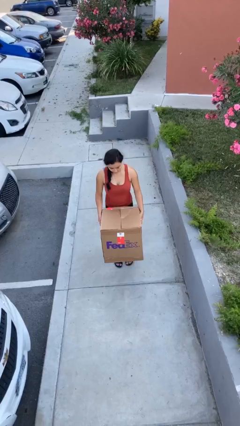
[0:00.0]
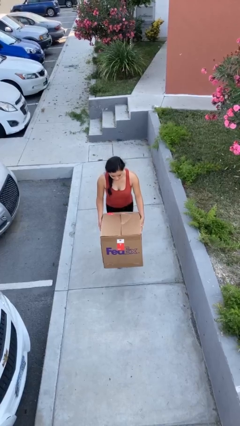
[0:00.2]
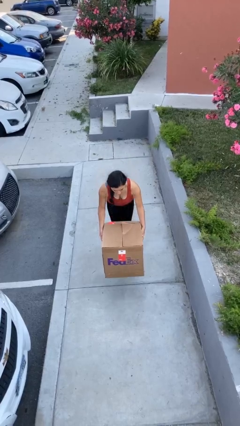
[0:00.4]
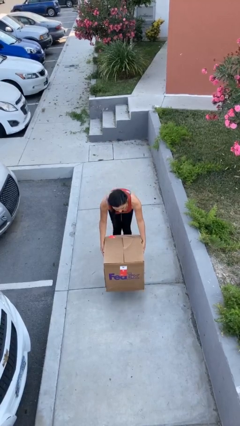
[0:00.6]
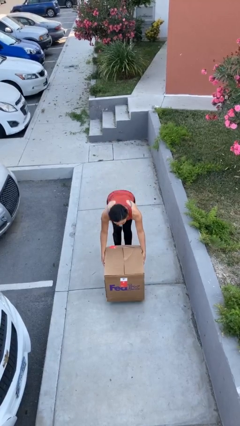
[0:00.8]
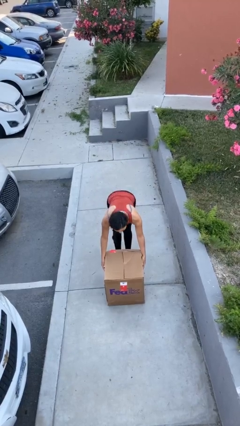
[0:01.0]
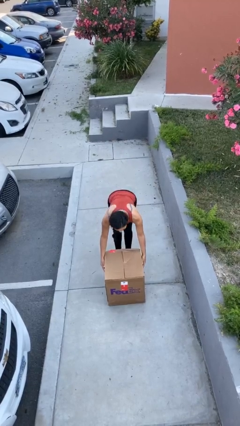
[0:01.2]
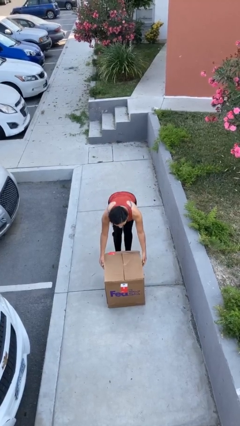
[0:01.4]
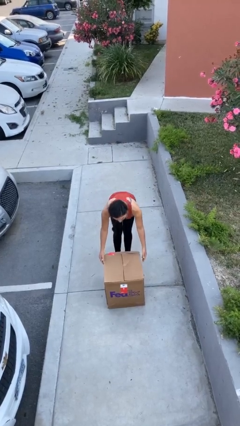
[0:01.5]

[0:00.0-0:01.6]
person puts down object on floor

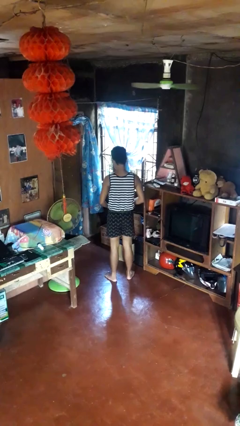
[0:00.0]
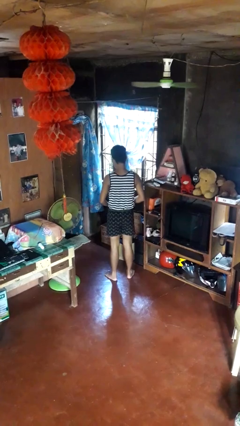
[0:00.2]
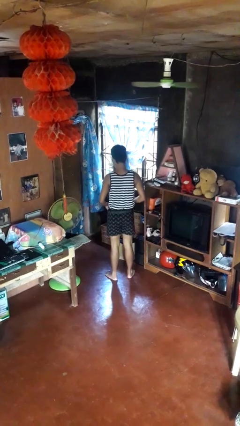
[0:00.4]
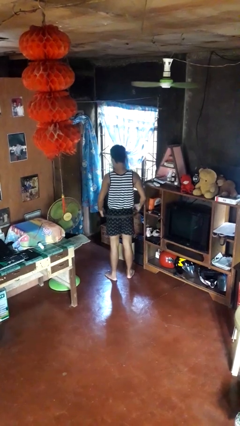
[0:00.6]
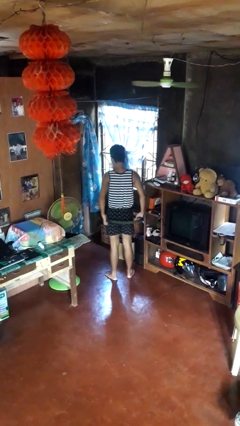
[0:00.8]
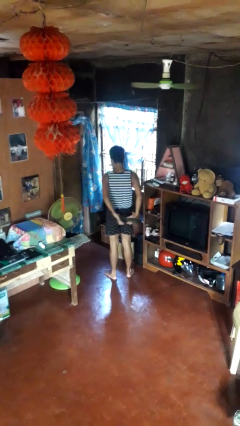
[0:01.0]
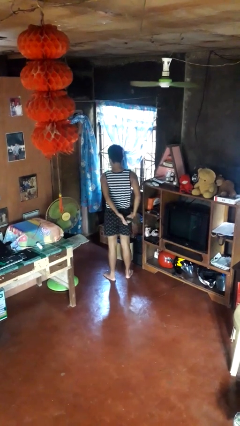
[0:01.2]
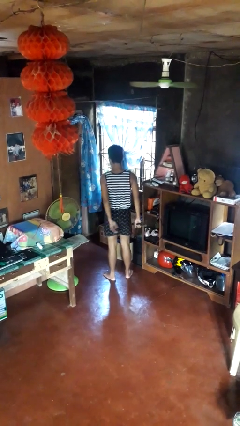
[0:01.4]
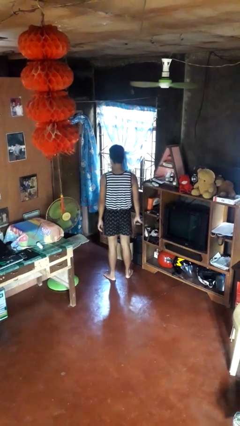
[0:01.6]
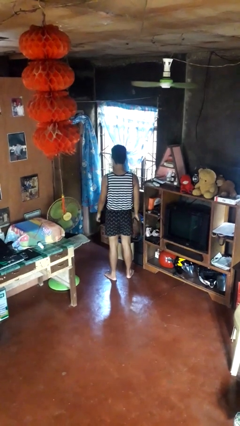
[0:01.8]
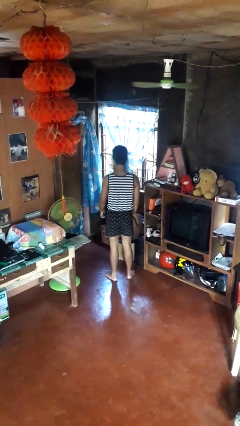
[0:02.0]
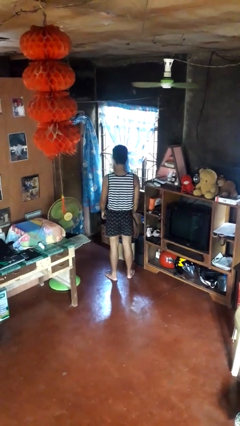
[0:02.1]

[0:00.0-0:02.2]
person takes off belt

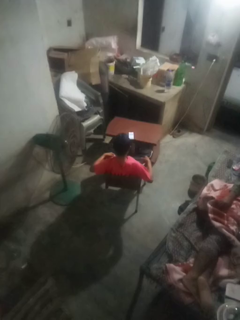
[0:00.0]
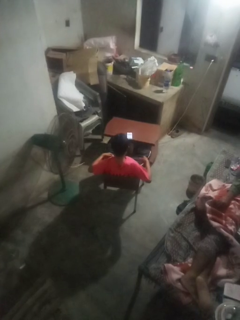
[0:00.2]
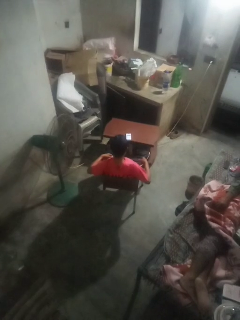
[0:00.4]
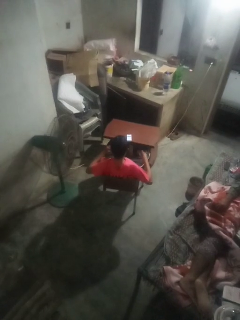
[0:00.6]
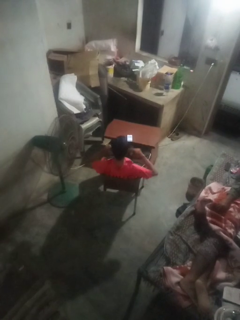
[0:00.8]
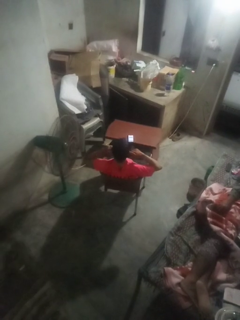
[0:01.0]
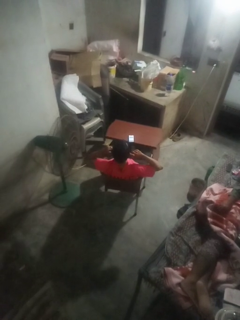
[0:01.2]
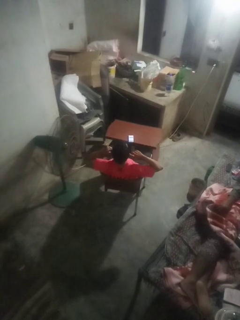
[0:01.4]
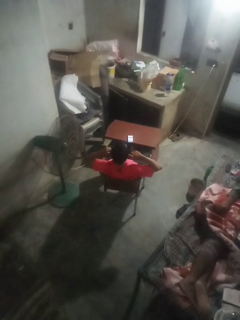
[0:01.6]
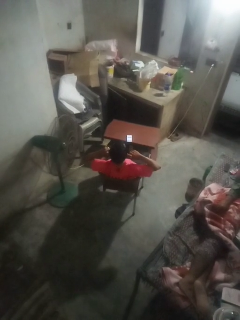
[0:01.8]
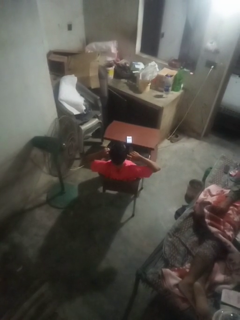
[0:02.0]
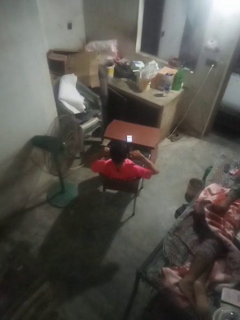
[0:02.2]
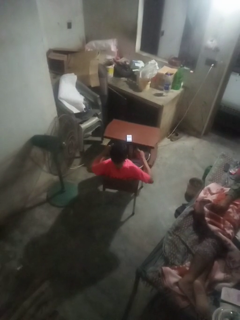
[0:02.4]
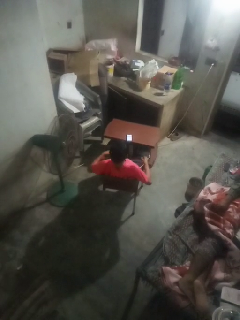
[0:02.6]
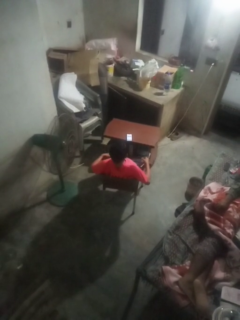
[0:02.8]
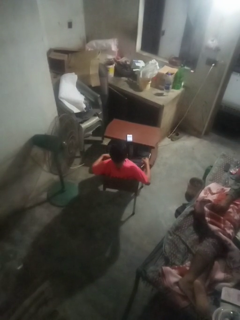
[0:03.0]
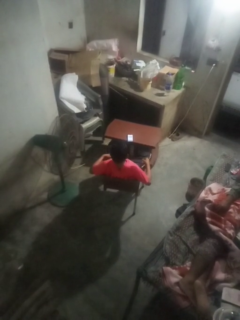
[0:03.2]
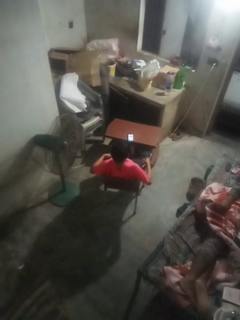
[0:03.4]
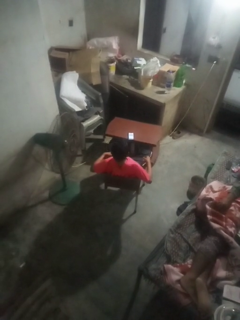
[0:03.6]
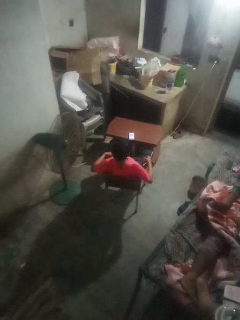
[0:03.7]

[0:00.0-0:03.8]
person puts fingers in ear

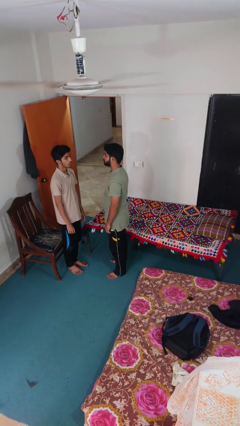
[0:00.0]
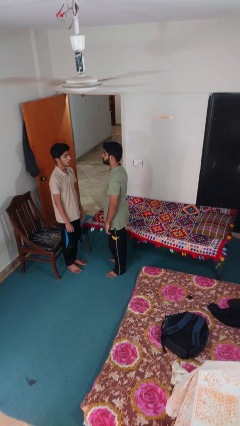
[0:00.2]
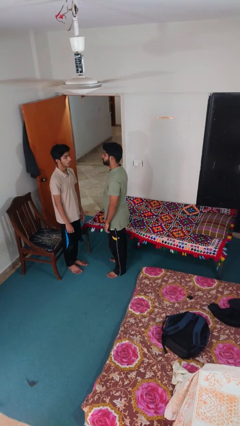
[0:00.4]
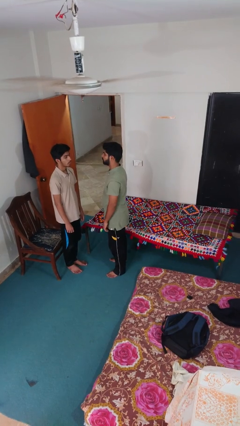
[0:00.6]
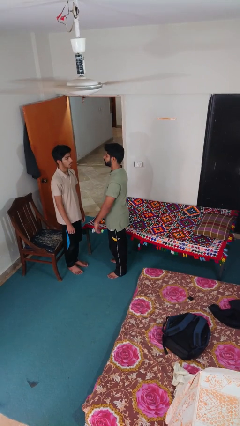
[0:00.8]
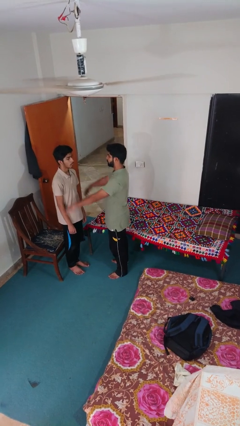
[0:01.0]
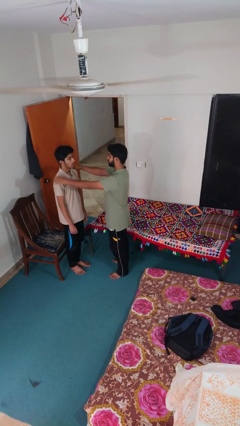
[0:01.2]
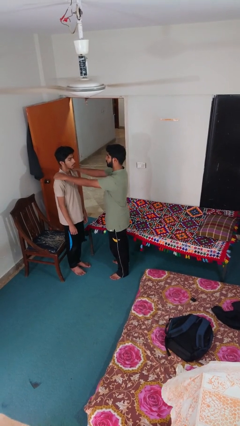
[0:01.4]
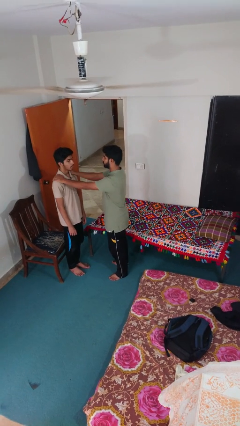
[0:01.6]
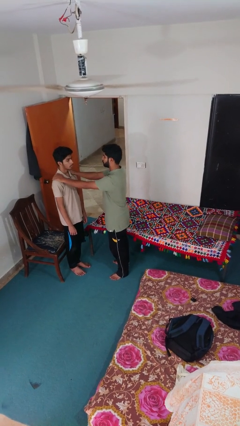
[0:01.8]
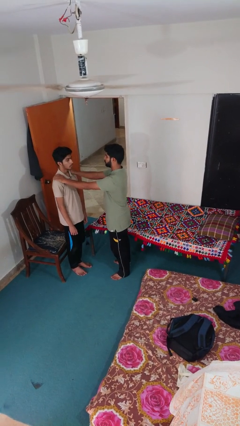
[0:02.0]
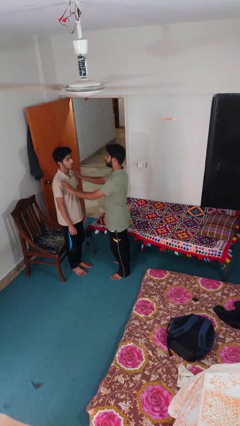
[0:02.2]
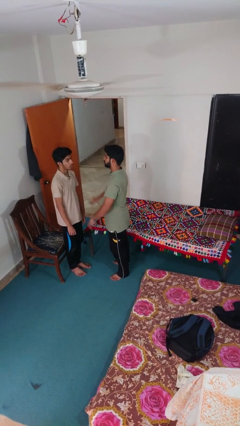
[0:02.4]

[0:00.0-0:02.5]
person pounds shoulders of person

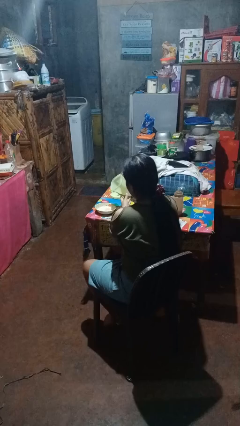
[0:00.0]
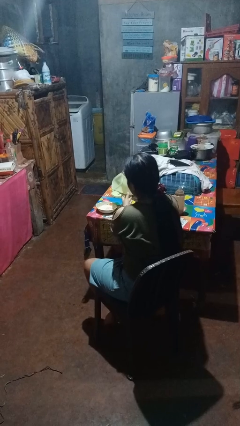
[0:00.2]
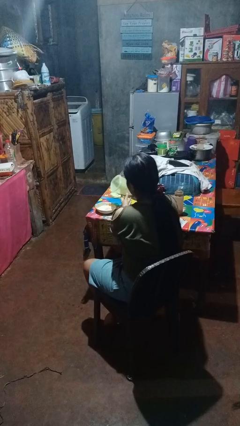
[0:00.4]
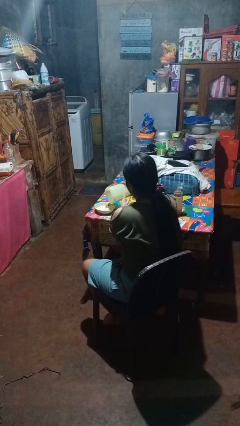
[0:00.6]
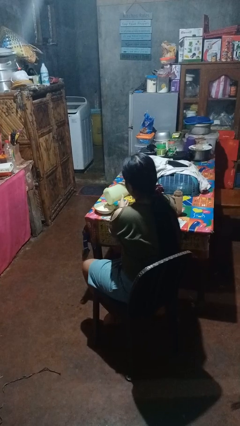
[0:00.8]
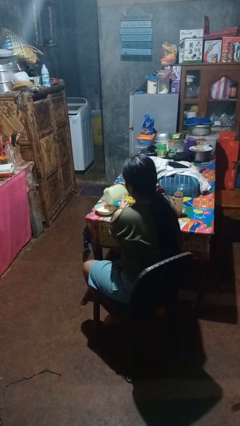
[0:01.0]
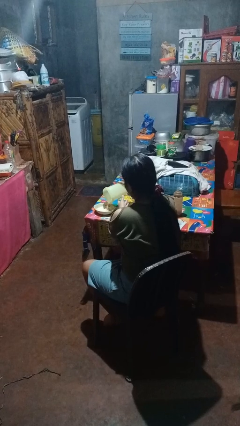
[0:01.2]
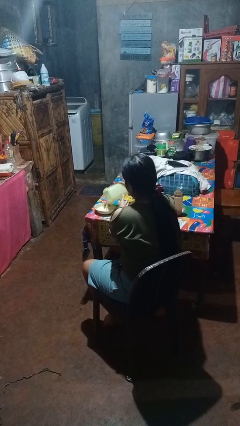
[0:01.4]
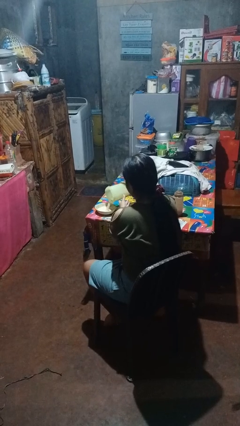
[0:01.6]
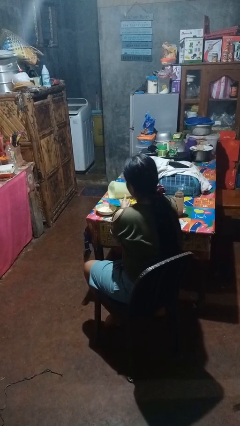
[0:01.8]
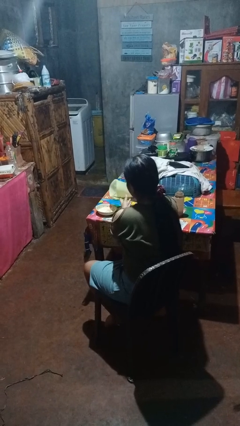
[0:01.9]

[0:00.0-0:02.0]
person pours into bowl

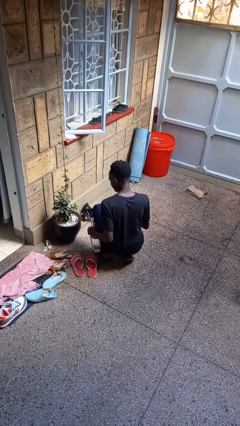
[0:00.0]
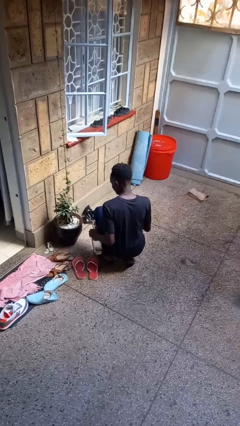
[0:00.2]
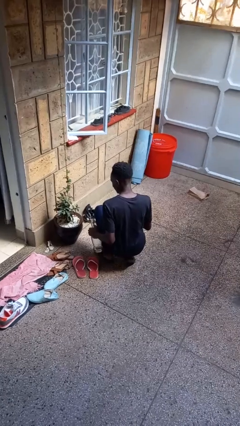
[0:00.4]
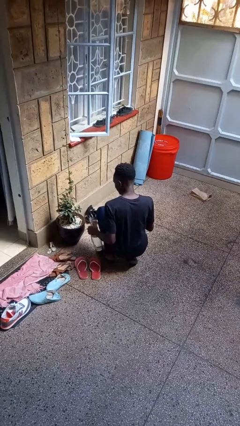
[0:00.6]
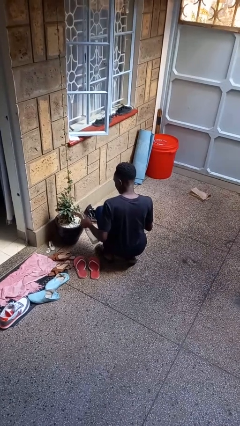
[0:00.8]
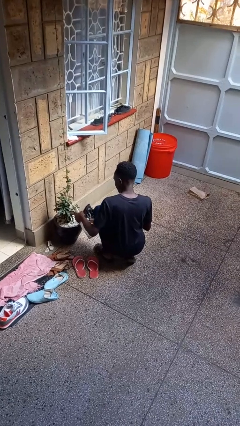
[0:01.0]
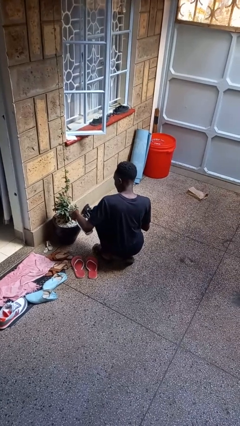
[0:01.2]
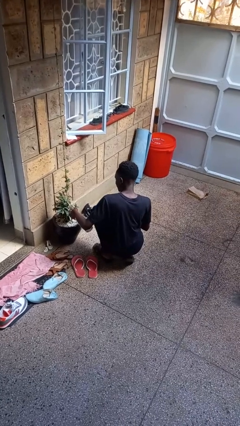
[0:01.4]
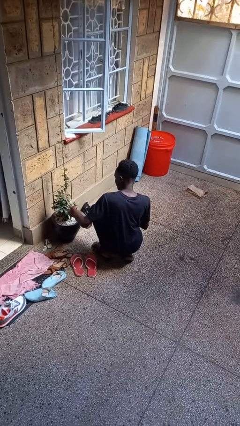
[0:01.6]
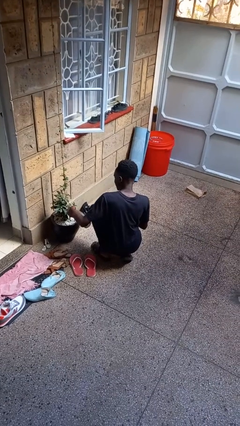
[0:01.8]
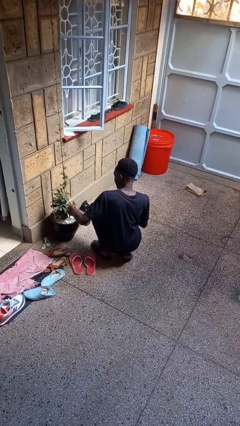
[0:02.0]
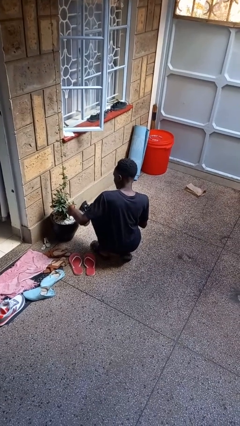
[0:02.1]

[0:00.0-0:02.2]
person waters houseplant

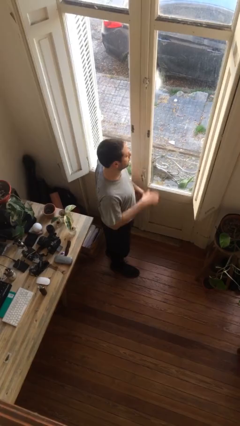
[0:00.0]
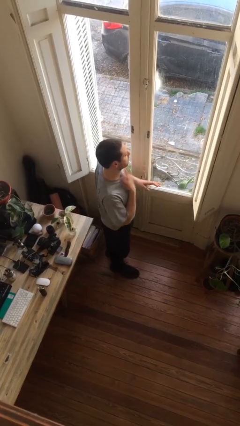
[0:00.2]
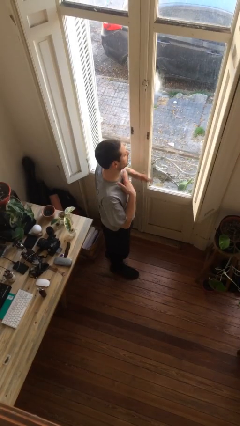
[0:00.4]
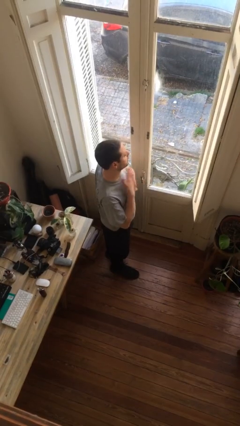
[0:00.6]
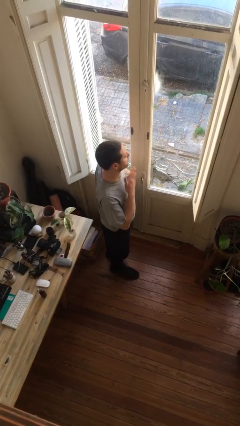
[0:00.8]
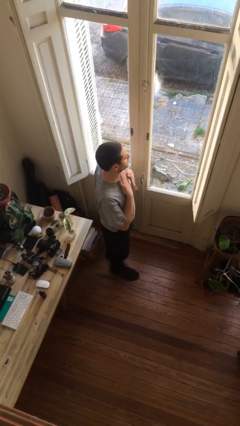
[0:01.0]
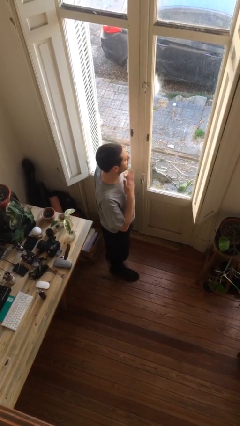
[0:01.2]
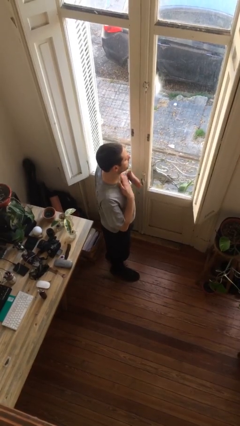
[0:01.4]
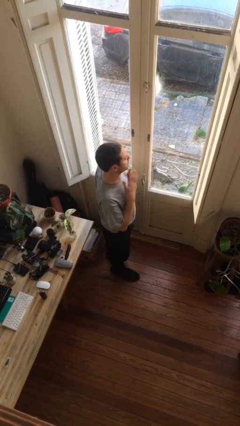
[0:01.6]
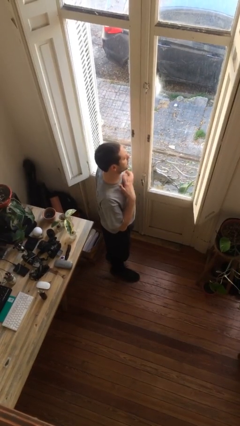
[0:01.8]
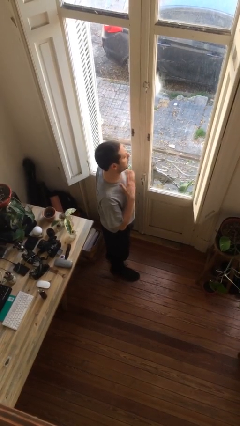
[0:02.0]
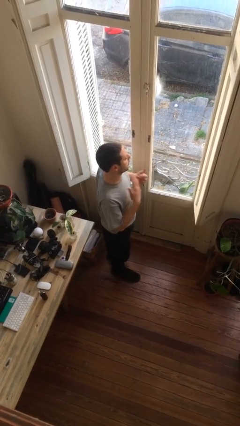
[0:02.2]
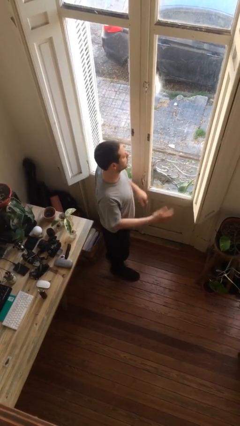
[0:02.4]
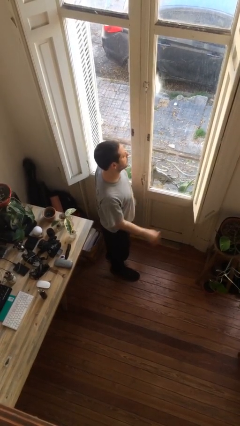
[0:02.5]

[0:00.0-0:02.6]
person drums on chest

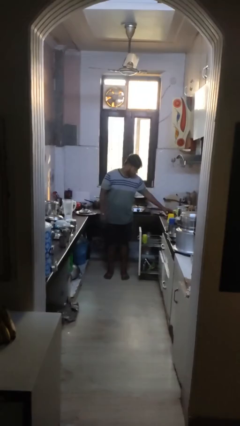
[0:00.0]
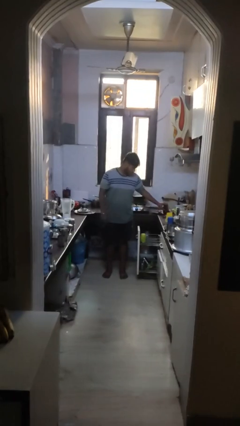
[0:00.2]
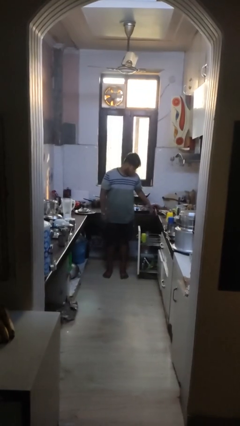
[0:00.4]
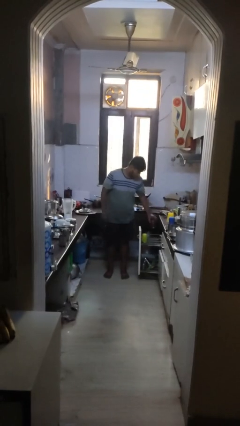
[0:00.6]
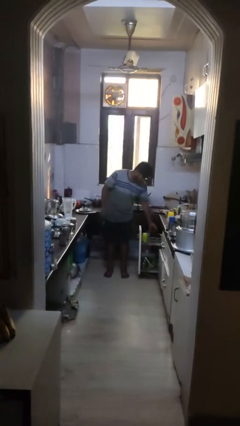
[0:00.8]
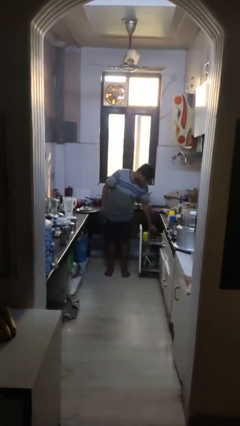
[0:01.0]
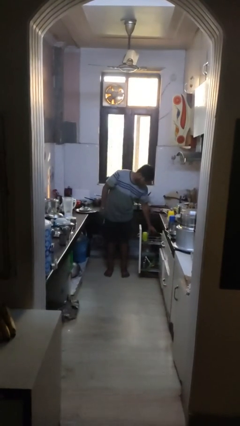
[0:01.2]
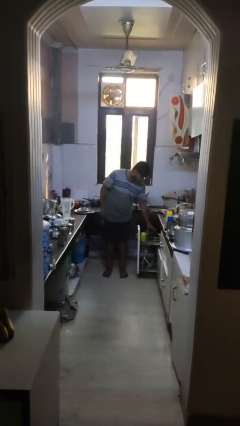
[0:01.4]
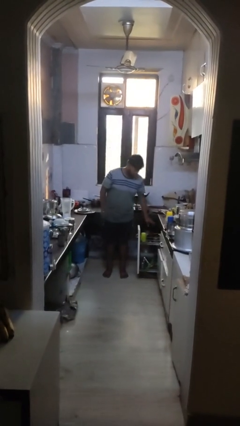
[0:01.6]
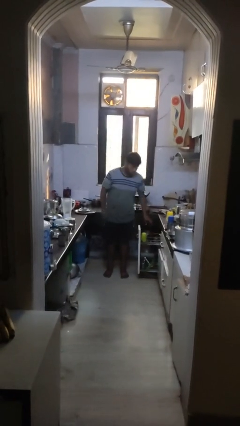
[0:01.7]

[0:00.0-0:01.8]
person loads dishwasher
